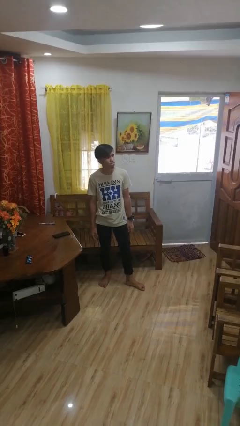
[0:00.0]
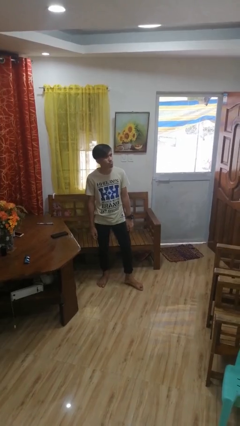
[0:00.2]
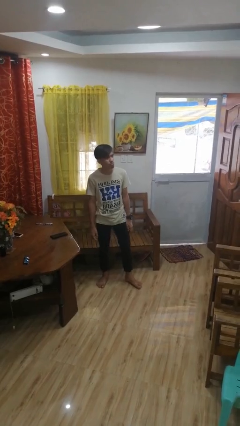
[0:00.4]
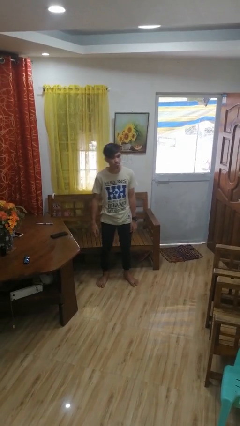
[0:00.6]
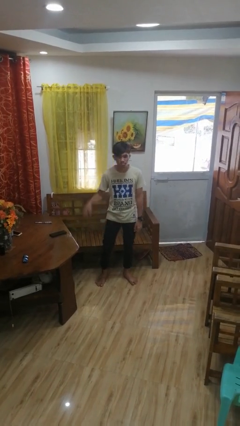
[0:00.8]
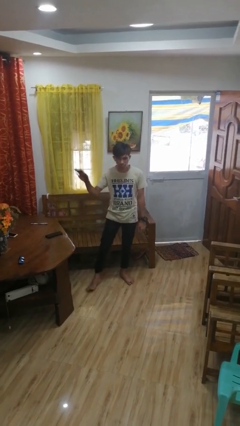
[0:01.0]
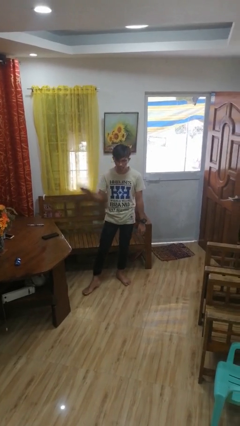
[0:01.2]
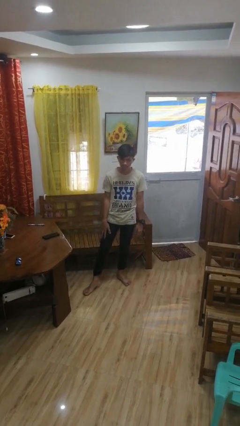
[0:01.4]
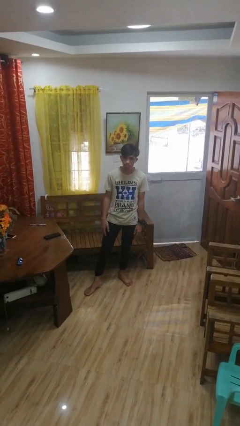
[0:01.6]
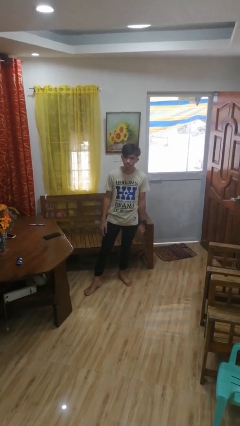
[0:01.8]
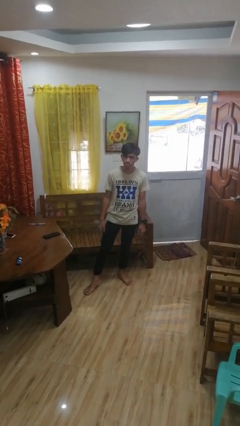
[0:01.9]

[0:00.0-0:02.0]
person slaps hands on thighs

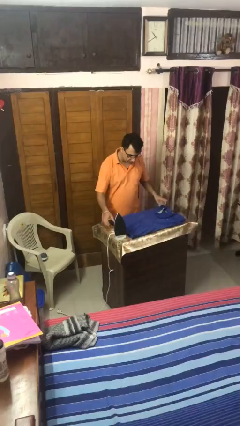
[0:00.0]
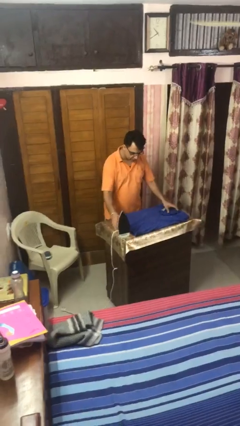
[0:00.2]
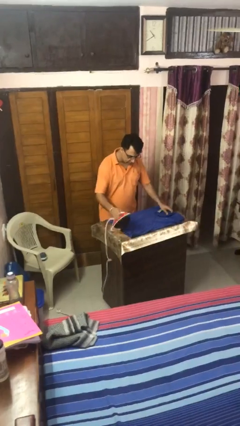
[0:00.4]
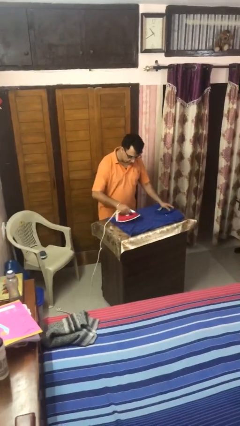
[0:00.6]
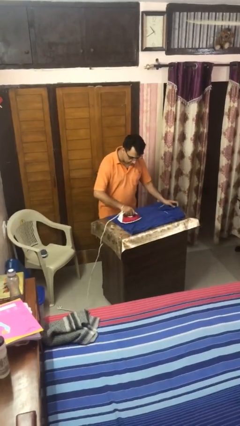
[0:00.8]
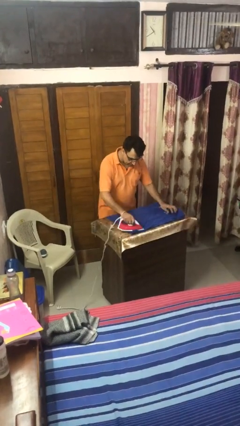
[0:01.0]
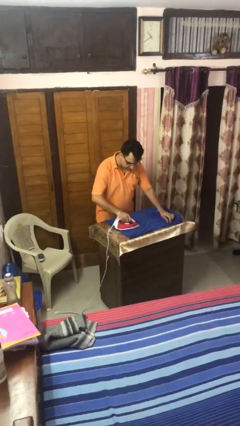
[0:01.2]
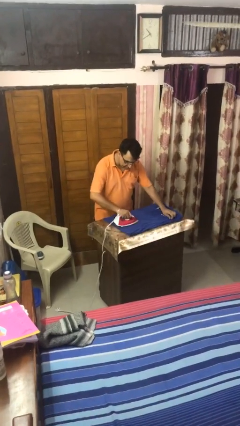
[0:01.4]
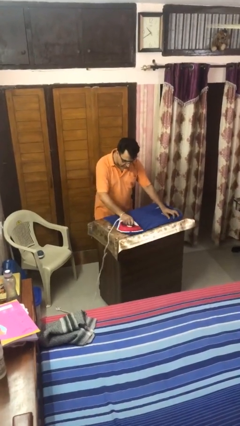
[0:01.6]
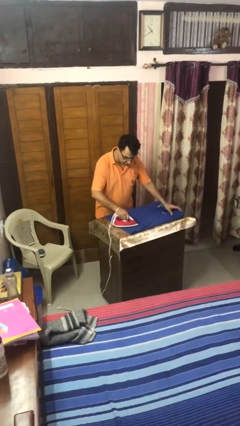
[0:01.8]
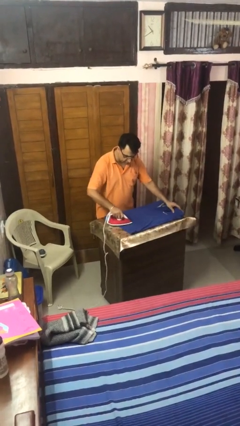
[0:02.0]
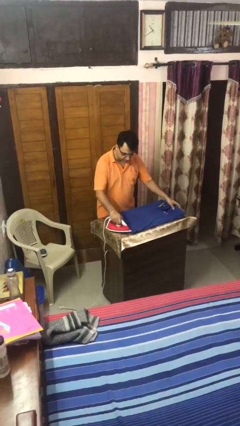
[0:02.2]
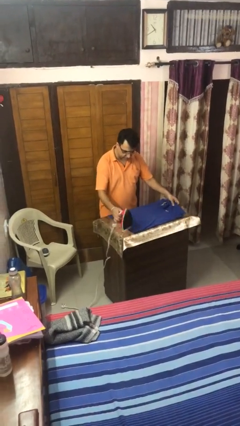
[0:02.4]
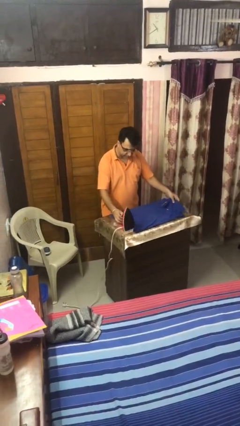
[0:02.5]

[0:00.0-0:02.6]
person irons clothes

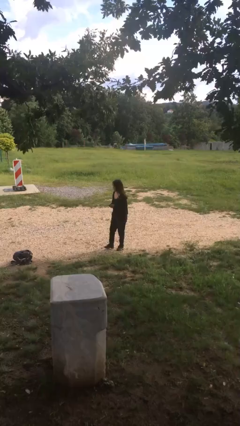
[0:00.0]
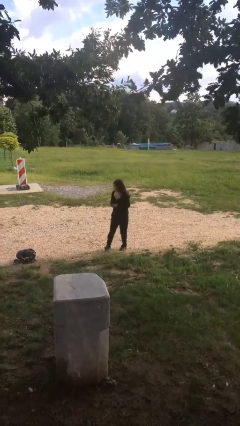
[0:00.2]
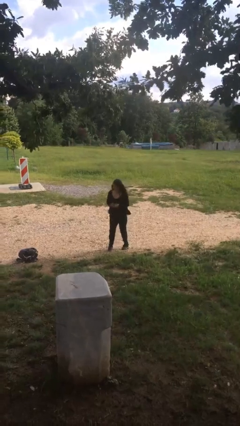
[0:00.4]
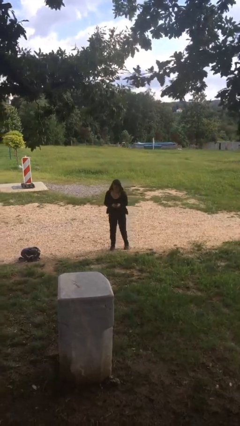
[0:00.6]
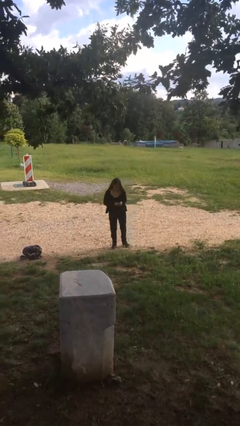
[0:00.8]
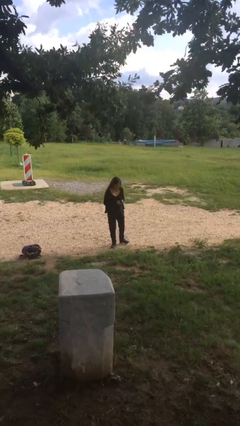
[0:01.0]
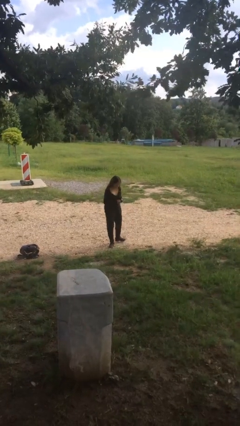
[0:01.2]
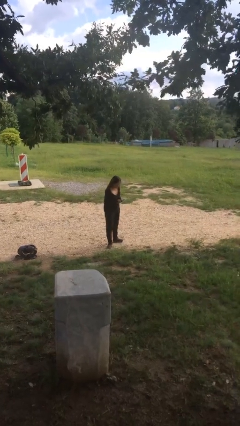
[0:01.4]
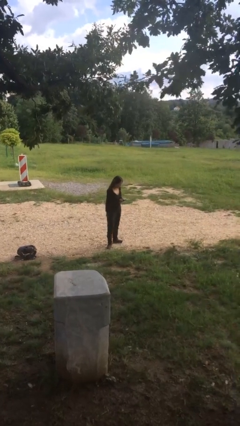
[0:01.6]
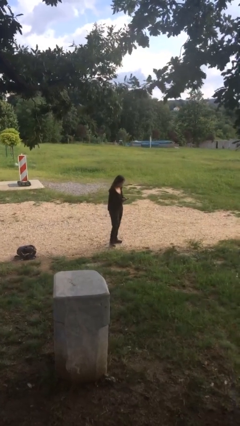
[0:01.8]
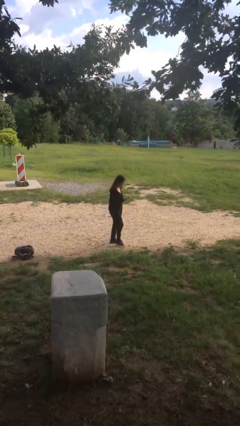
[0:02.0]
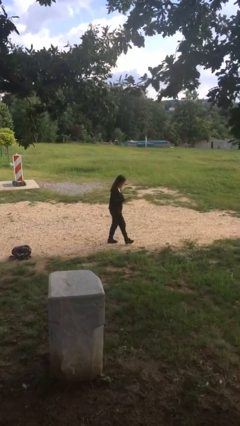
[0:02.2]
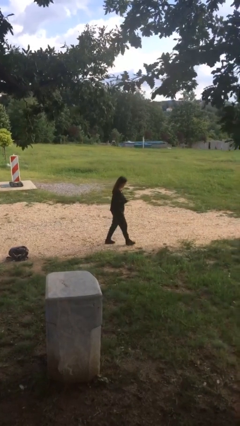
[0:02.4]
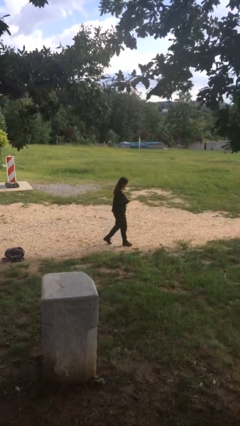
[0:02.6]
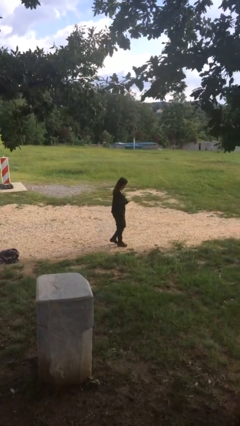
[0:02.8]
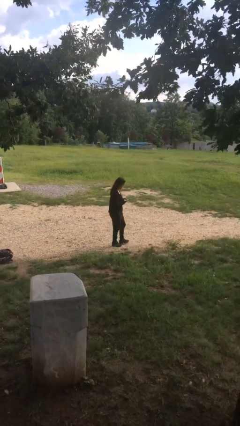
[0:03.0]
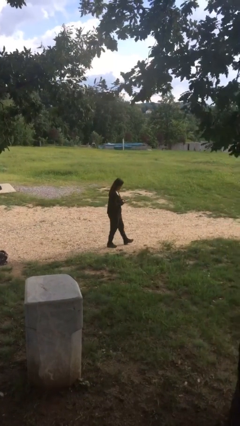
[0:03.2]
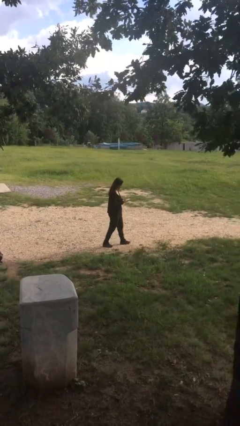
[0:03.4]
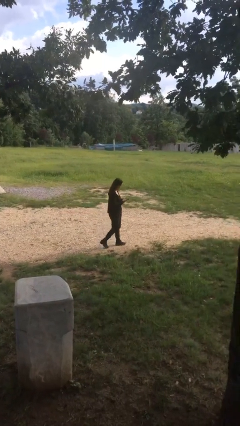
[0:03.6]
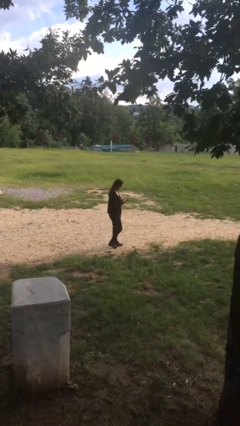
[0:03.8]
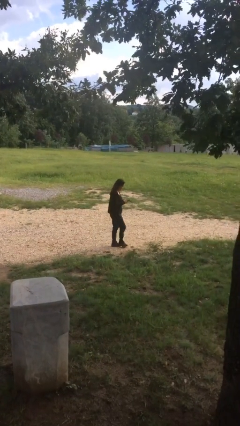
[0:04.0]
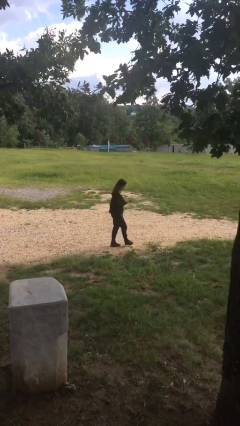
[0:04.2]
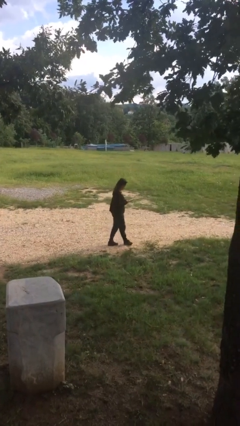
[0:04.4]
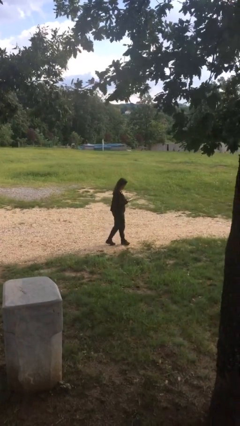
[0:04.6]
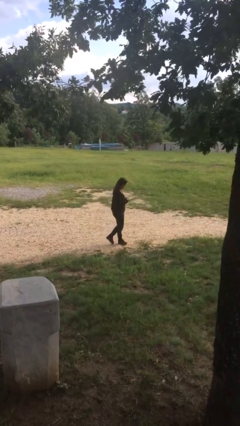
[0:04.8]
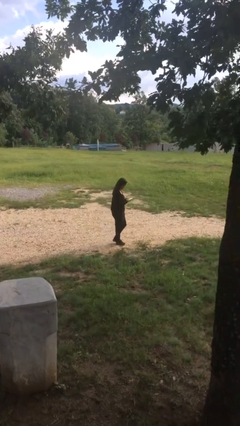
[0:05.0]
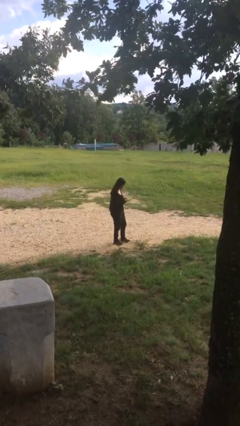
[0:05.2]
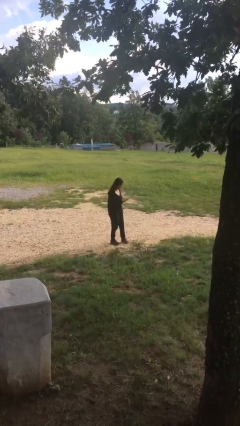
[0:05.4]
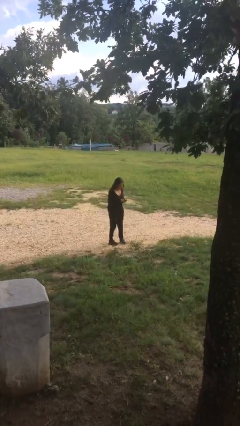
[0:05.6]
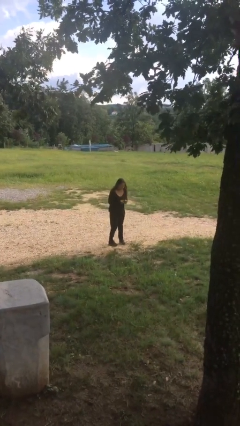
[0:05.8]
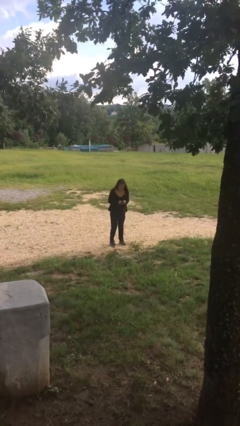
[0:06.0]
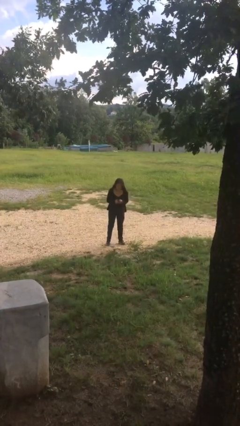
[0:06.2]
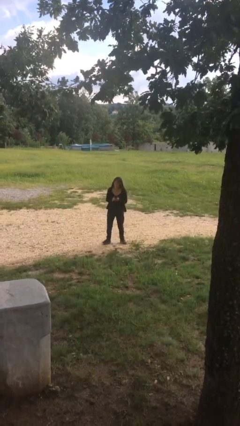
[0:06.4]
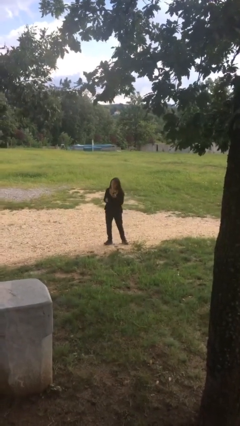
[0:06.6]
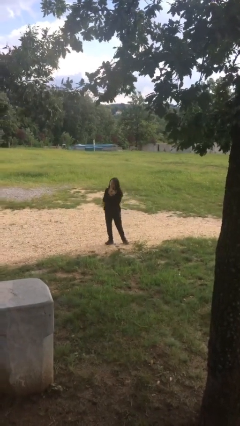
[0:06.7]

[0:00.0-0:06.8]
person texts on phone

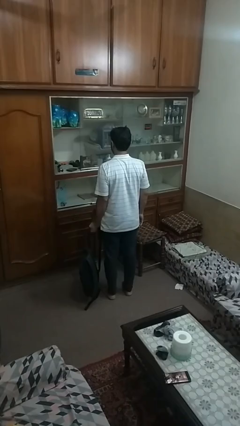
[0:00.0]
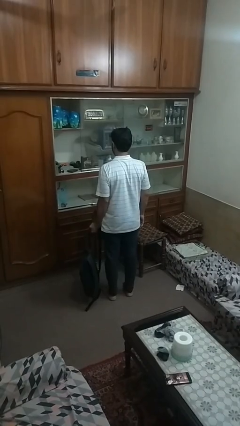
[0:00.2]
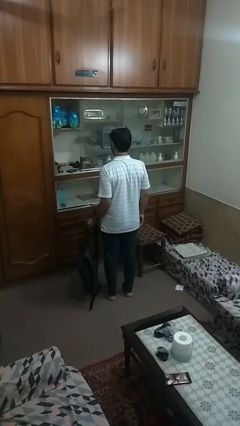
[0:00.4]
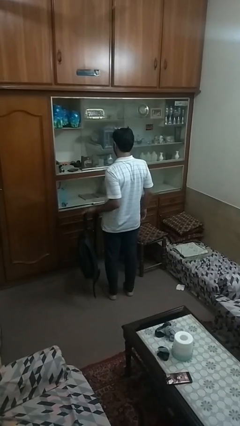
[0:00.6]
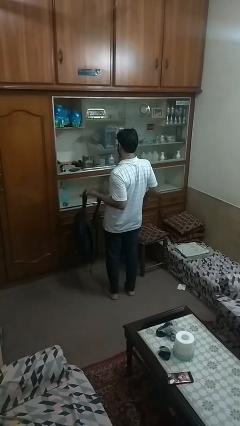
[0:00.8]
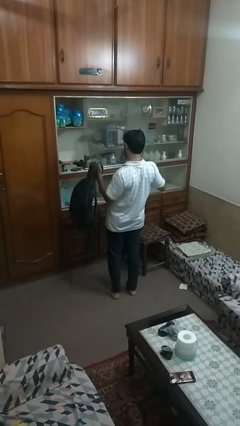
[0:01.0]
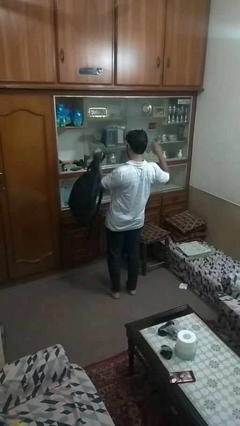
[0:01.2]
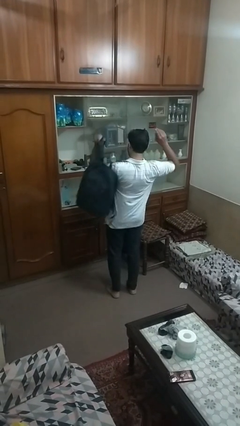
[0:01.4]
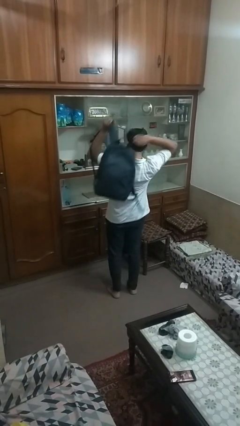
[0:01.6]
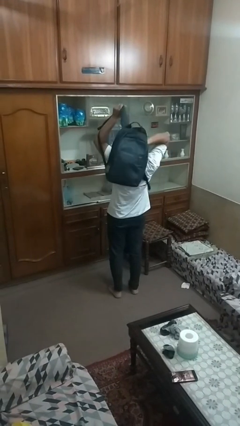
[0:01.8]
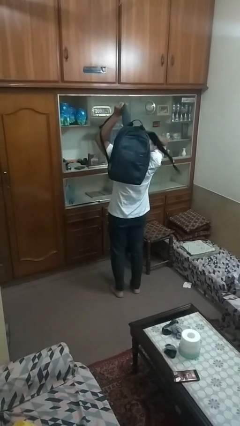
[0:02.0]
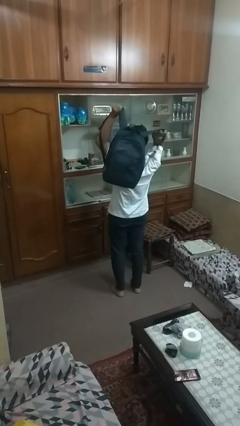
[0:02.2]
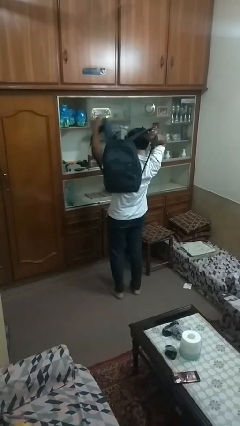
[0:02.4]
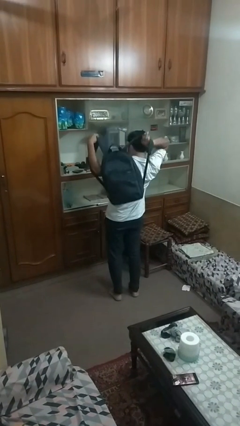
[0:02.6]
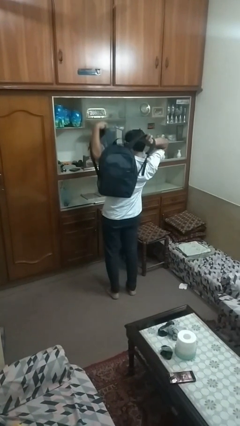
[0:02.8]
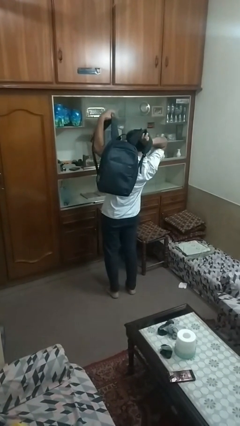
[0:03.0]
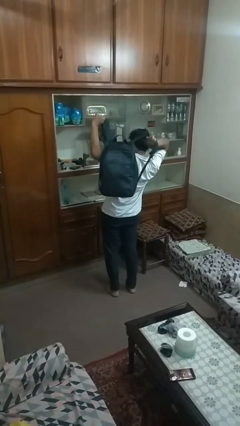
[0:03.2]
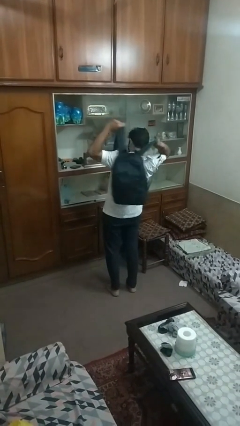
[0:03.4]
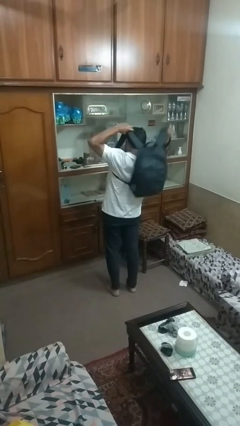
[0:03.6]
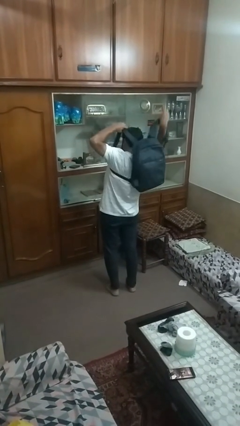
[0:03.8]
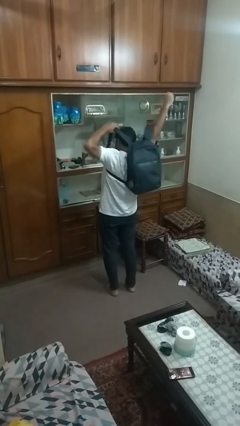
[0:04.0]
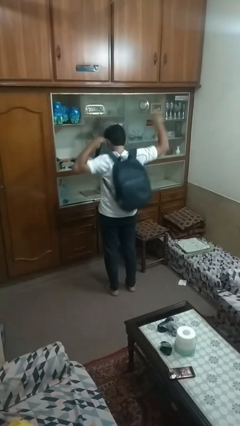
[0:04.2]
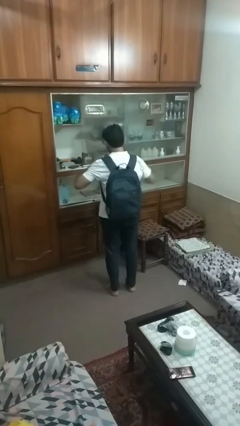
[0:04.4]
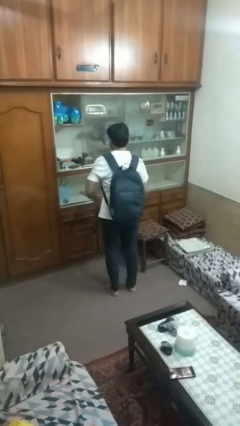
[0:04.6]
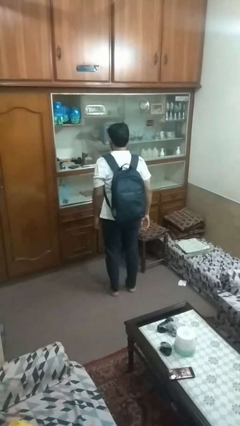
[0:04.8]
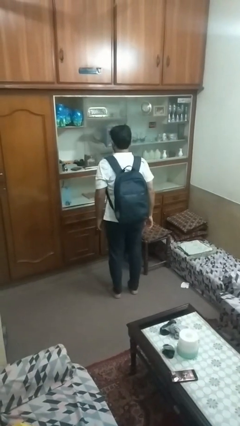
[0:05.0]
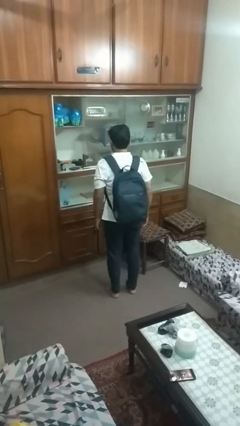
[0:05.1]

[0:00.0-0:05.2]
person puts on backpack

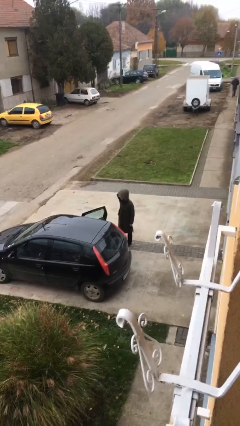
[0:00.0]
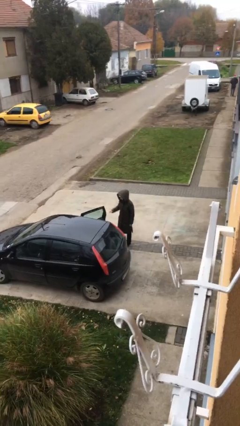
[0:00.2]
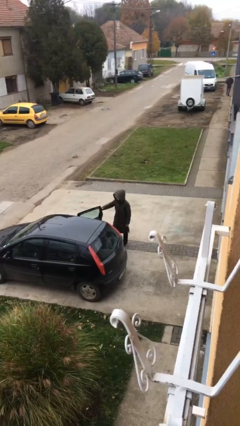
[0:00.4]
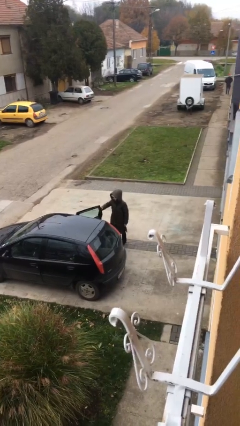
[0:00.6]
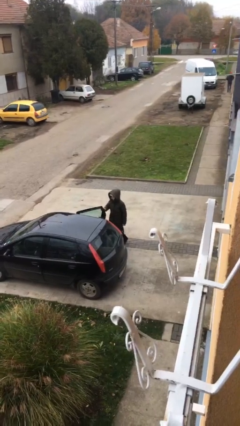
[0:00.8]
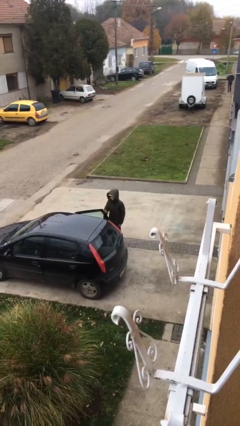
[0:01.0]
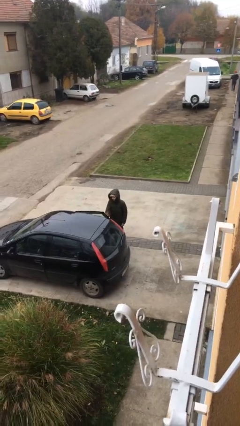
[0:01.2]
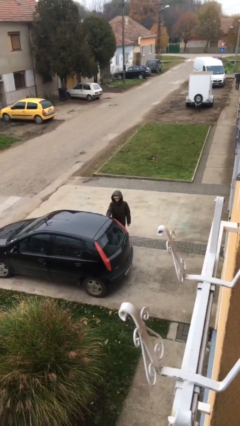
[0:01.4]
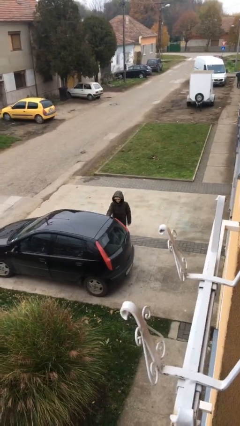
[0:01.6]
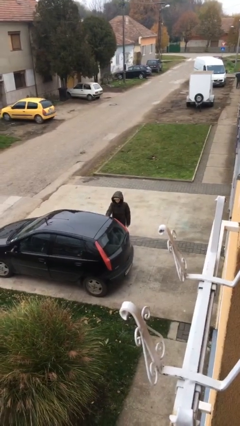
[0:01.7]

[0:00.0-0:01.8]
person closes car door
